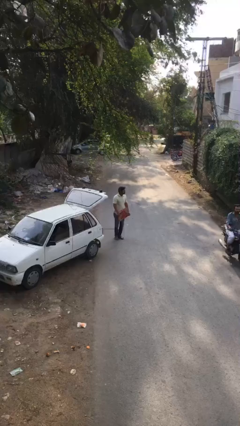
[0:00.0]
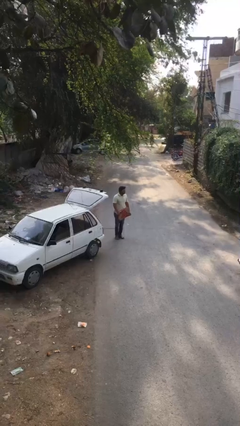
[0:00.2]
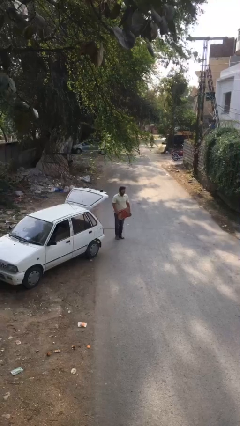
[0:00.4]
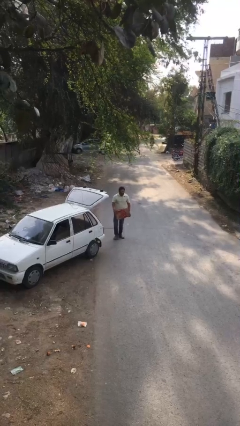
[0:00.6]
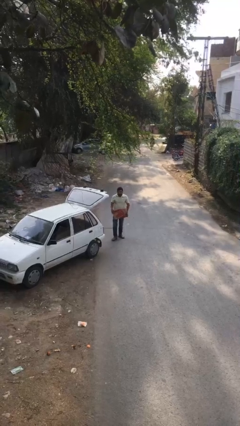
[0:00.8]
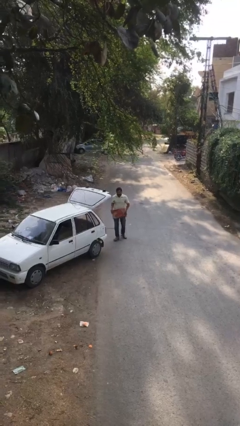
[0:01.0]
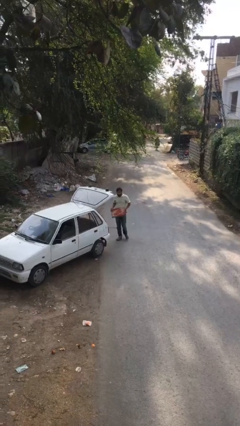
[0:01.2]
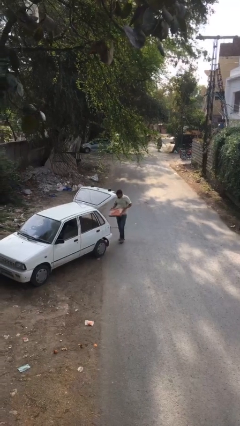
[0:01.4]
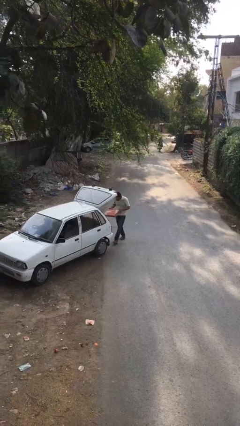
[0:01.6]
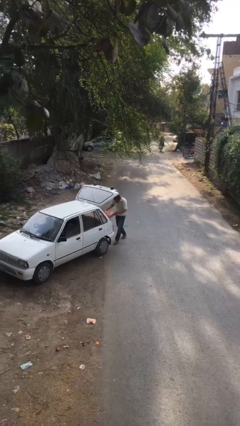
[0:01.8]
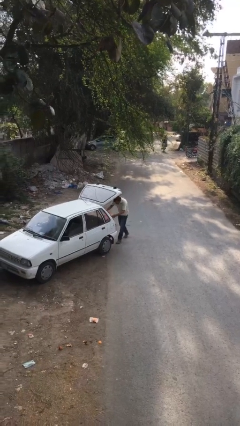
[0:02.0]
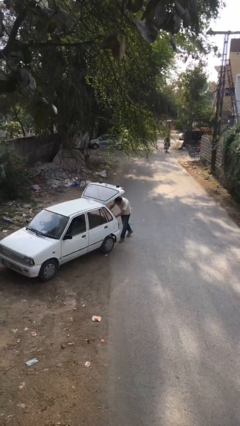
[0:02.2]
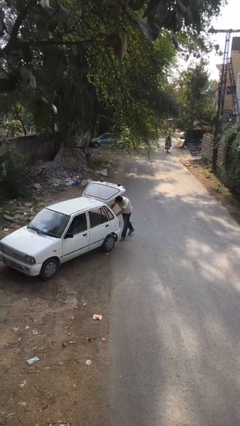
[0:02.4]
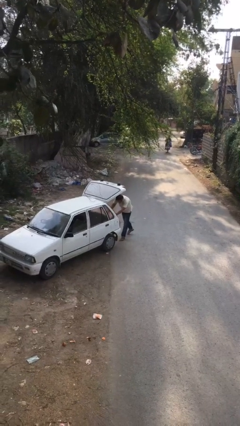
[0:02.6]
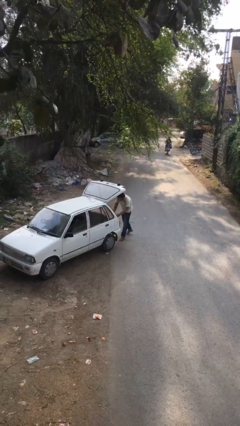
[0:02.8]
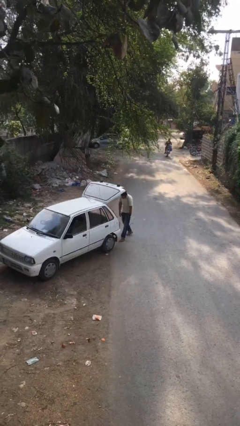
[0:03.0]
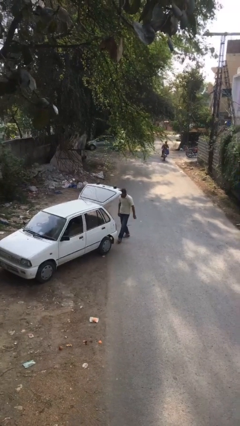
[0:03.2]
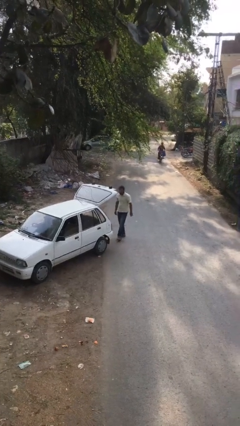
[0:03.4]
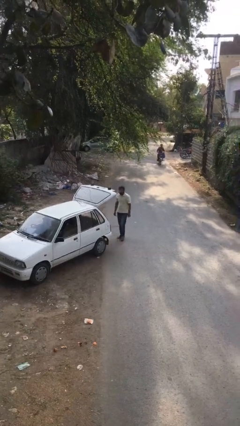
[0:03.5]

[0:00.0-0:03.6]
person loads car

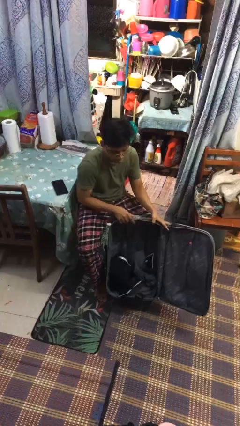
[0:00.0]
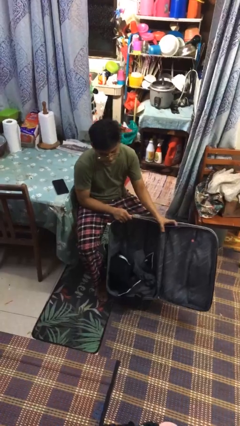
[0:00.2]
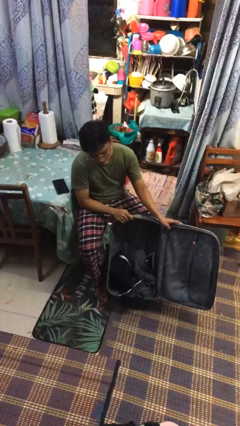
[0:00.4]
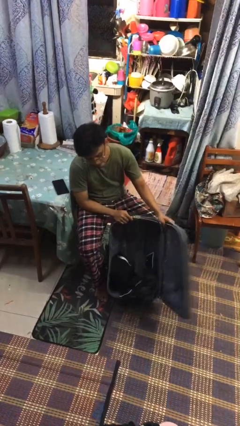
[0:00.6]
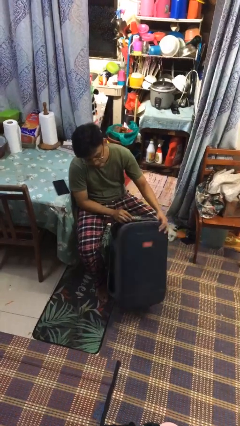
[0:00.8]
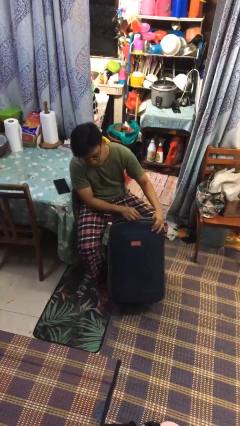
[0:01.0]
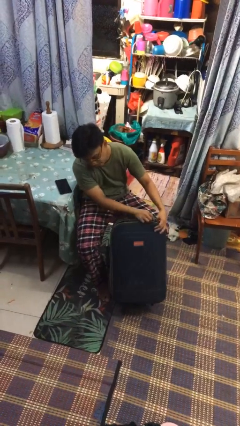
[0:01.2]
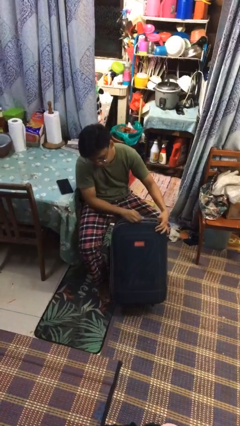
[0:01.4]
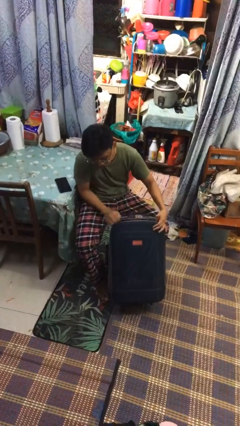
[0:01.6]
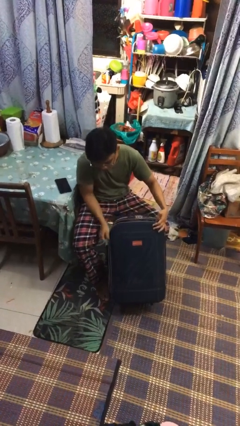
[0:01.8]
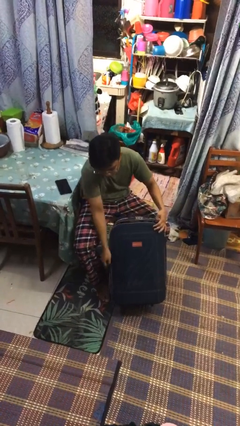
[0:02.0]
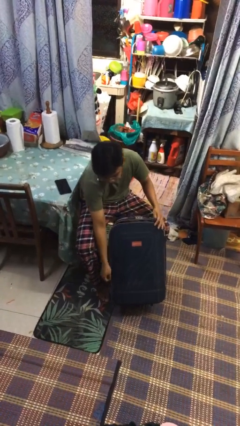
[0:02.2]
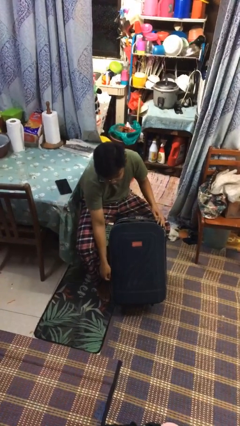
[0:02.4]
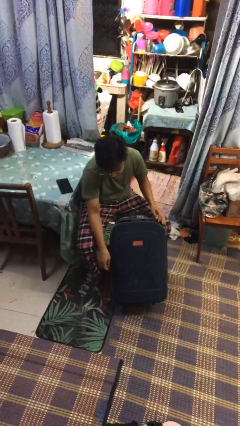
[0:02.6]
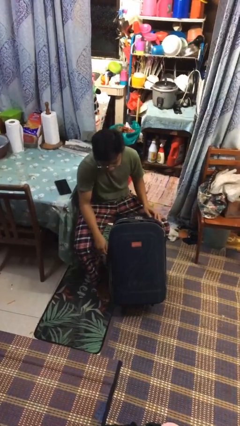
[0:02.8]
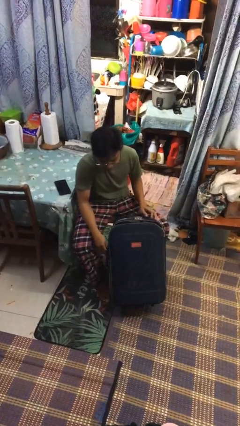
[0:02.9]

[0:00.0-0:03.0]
person closes suitcase

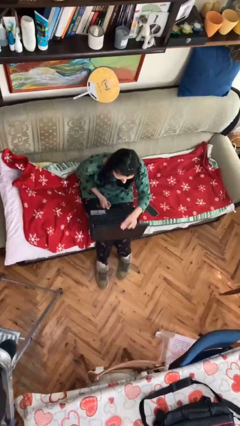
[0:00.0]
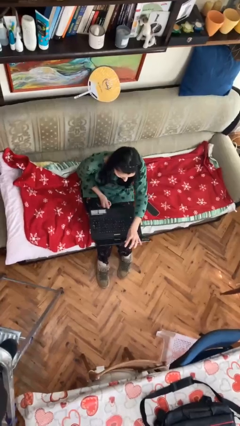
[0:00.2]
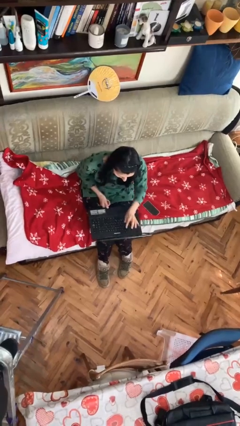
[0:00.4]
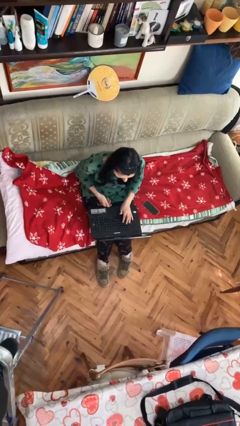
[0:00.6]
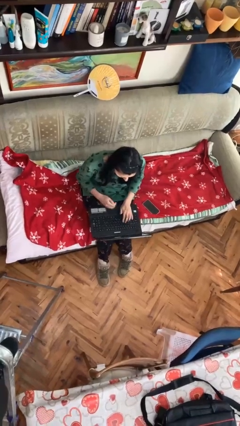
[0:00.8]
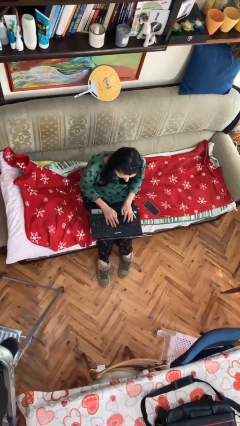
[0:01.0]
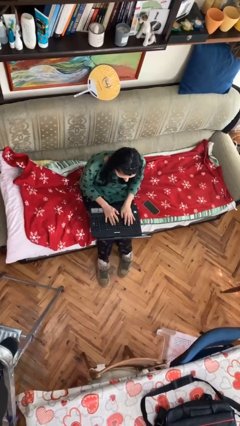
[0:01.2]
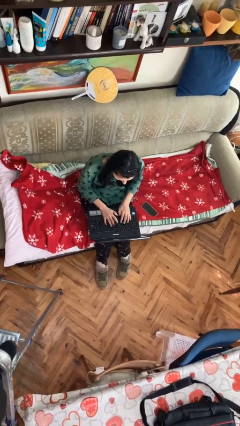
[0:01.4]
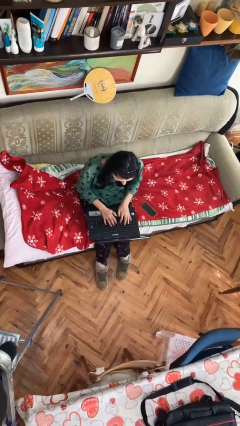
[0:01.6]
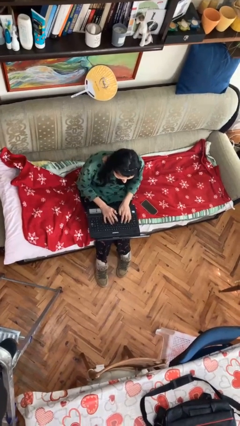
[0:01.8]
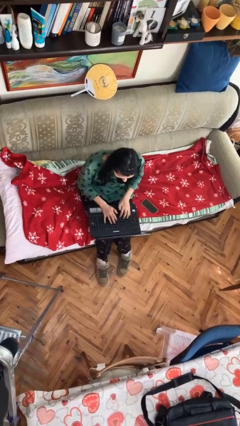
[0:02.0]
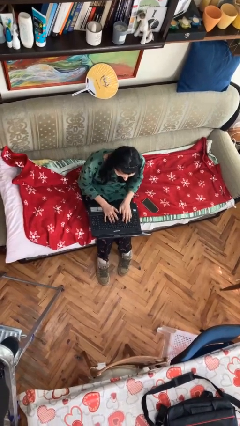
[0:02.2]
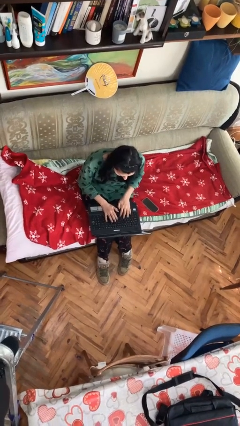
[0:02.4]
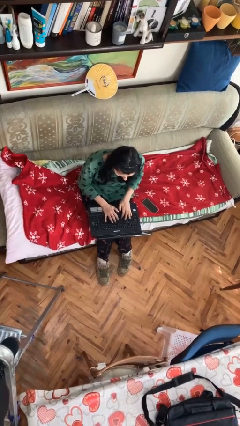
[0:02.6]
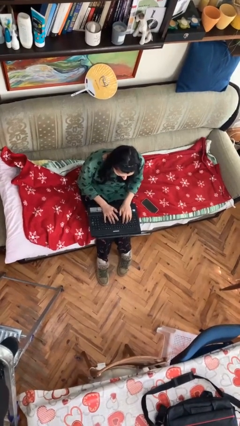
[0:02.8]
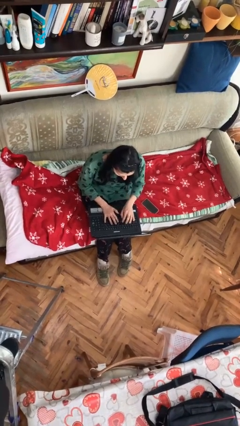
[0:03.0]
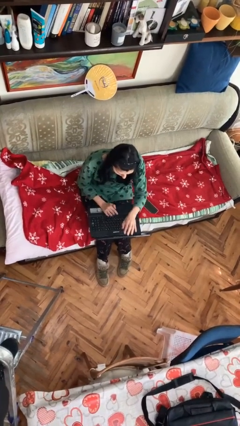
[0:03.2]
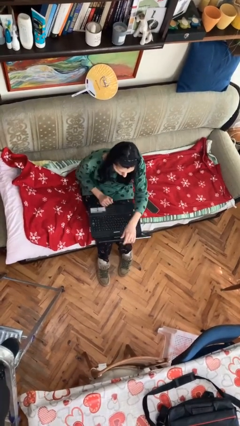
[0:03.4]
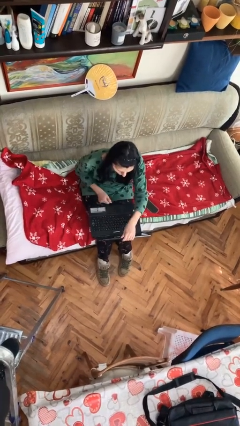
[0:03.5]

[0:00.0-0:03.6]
person interacts with laptop

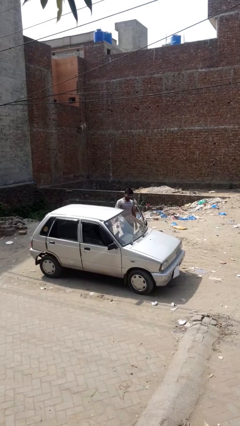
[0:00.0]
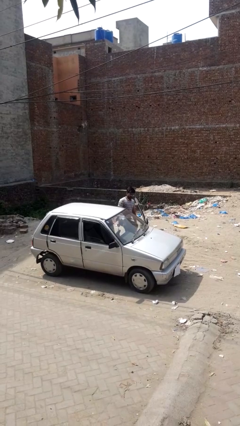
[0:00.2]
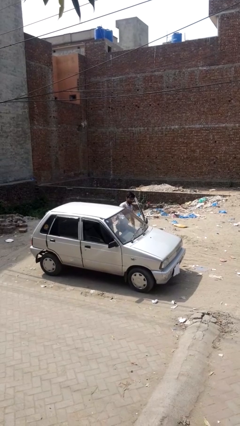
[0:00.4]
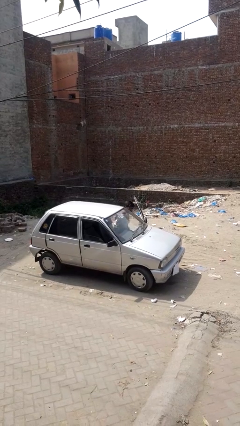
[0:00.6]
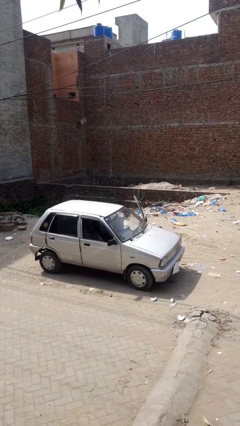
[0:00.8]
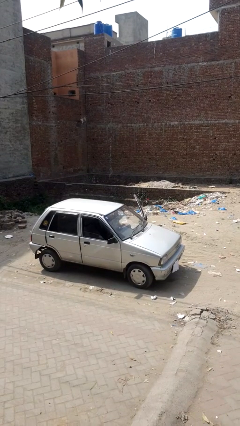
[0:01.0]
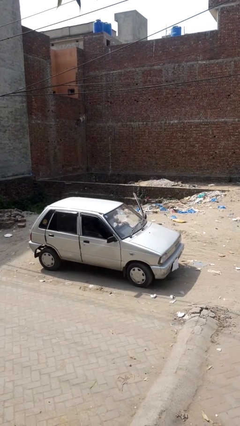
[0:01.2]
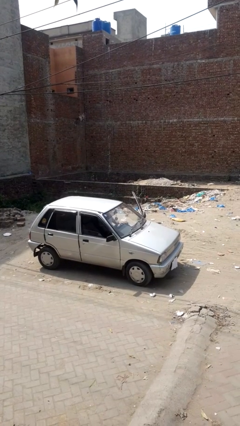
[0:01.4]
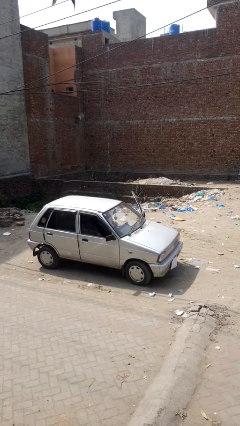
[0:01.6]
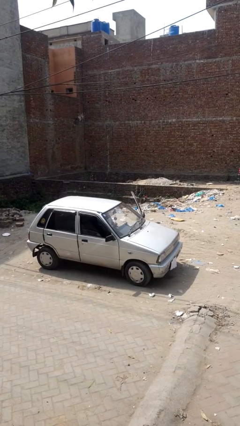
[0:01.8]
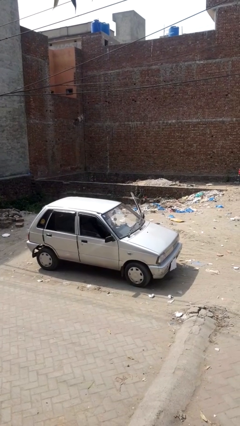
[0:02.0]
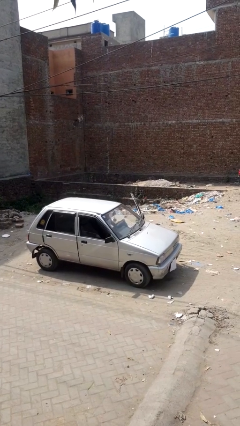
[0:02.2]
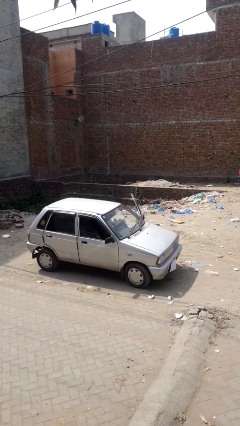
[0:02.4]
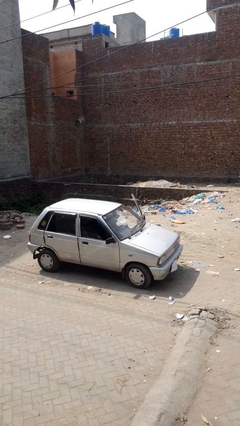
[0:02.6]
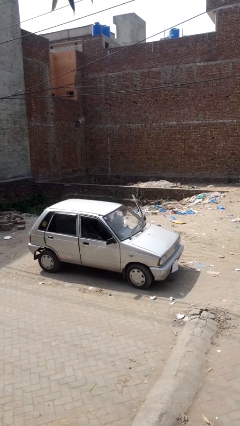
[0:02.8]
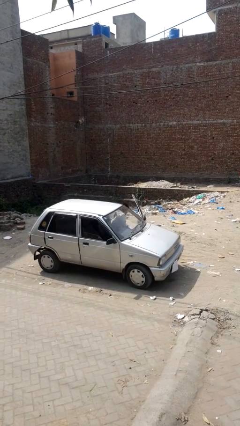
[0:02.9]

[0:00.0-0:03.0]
person enters car

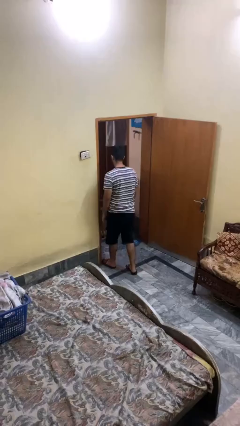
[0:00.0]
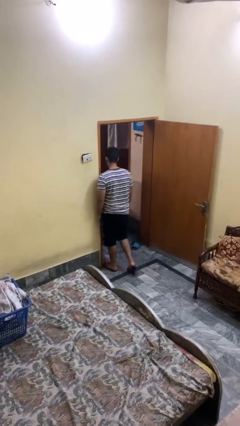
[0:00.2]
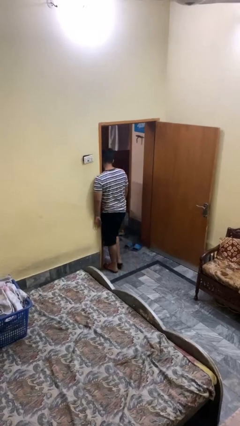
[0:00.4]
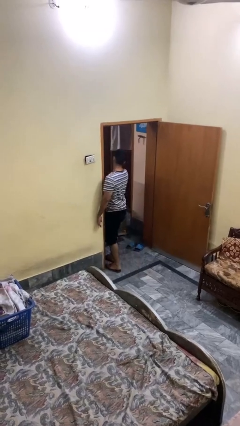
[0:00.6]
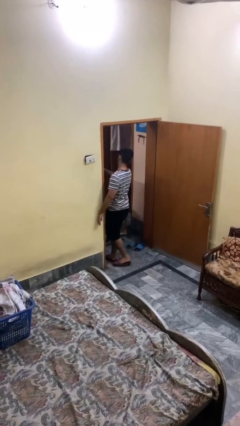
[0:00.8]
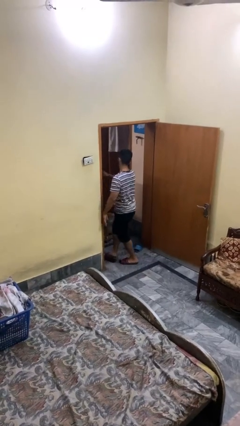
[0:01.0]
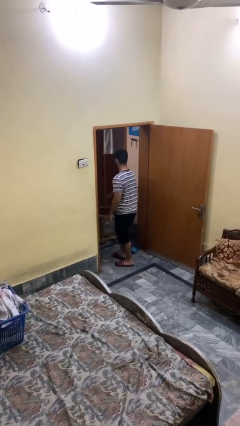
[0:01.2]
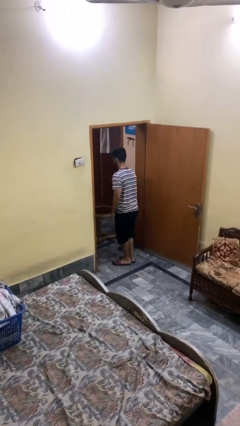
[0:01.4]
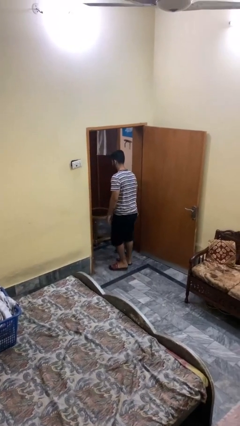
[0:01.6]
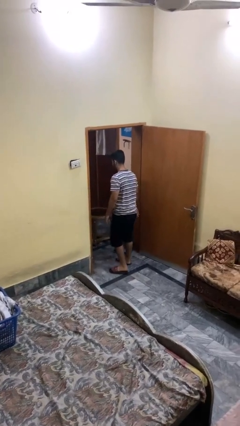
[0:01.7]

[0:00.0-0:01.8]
person bumps into wall

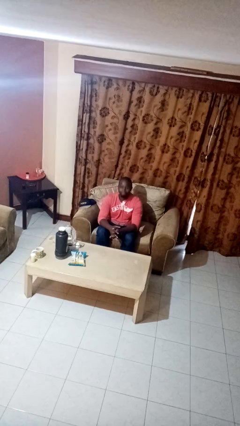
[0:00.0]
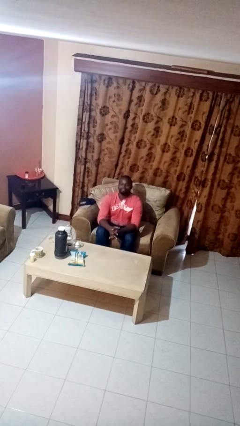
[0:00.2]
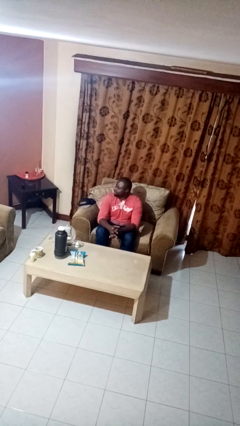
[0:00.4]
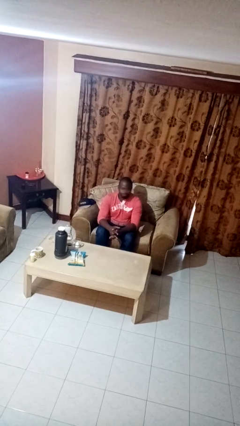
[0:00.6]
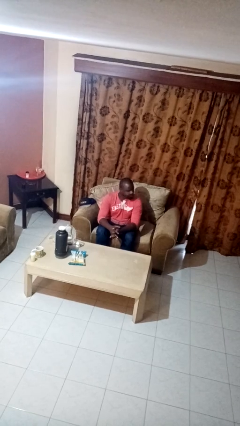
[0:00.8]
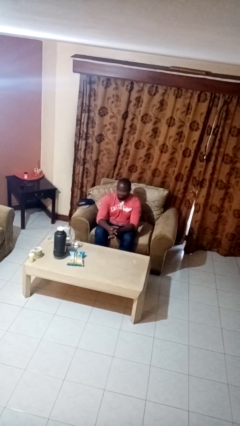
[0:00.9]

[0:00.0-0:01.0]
person nods head

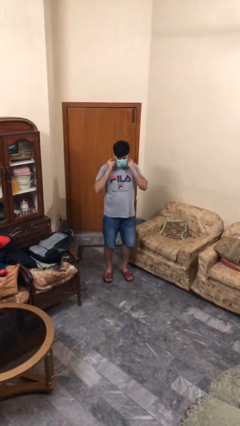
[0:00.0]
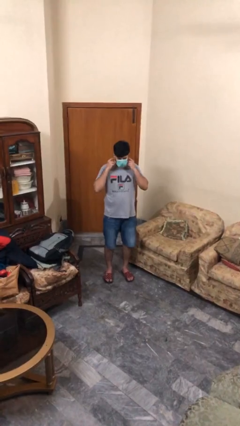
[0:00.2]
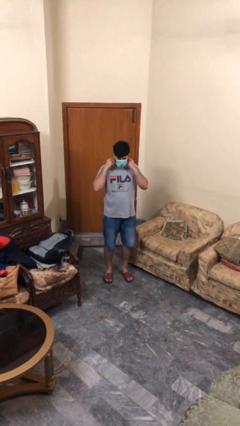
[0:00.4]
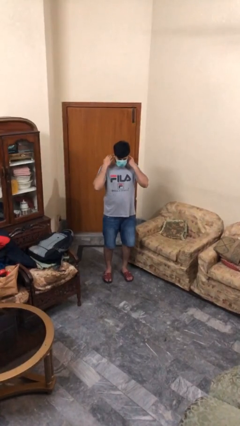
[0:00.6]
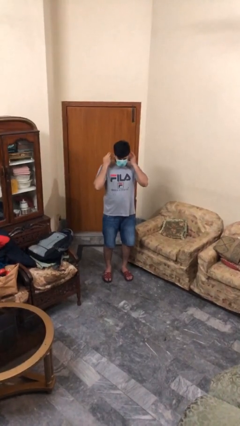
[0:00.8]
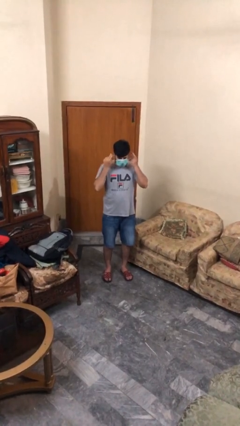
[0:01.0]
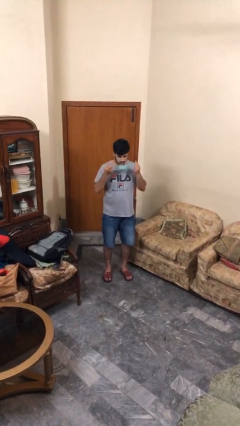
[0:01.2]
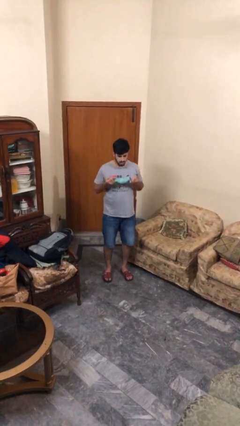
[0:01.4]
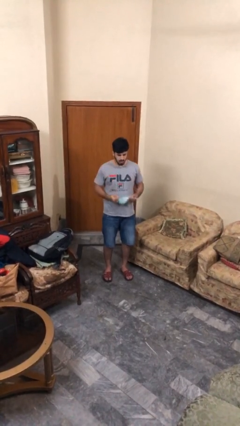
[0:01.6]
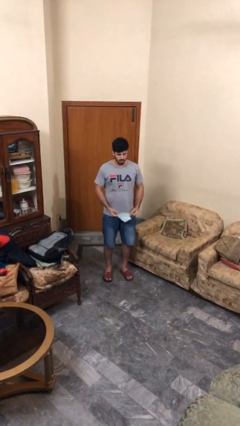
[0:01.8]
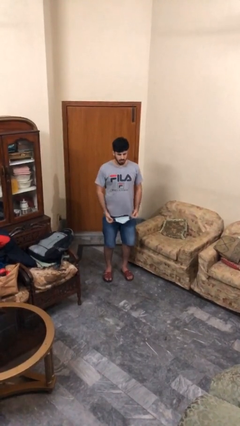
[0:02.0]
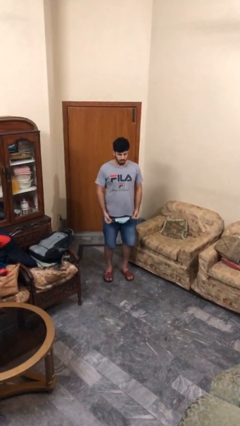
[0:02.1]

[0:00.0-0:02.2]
person takes off facemask
